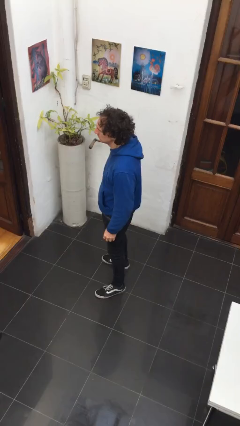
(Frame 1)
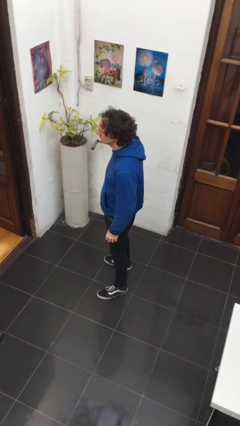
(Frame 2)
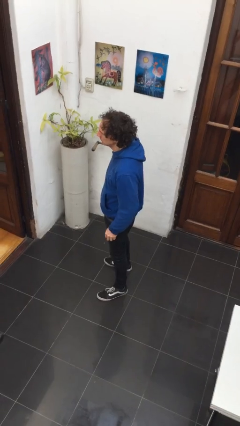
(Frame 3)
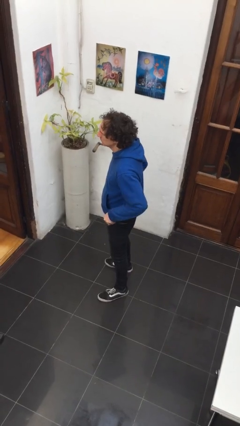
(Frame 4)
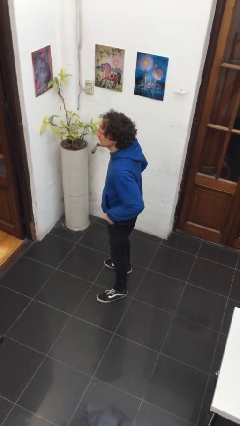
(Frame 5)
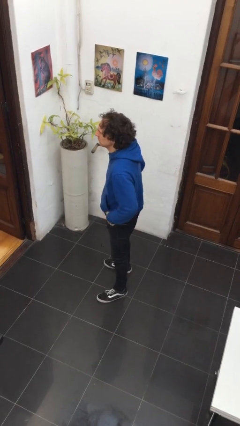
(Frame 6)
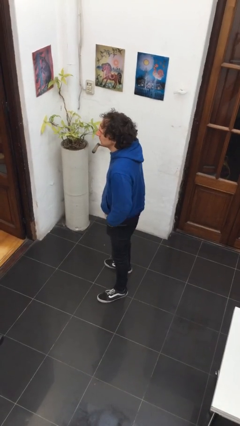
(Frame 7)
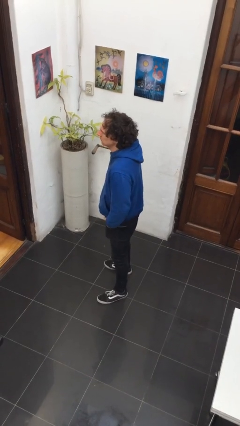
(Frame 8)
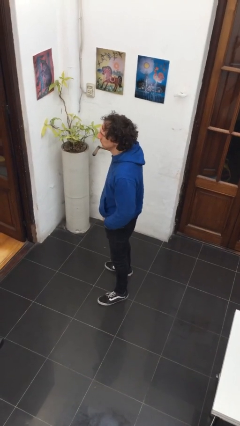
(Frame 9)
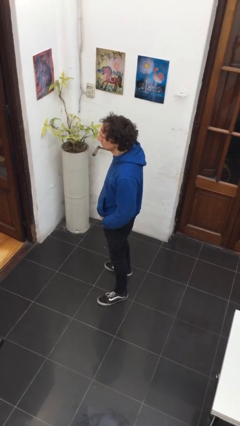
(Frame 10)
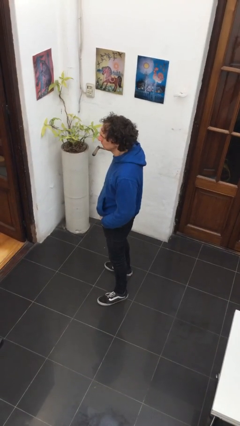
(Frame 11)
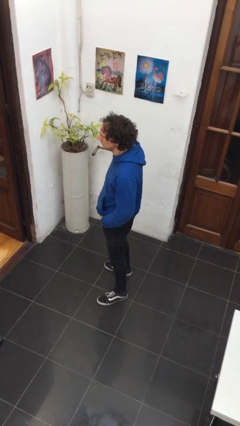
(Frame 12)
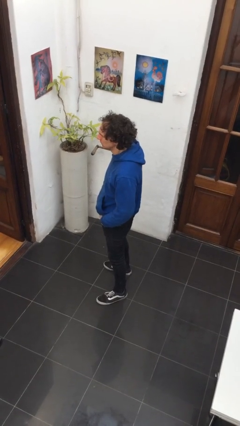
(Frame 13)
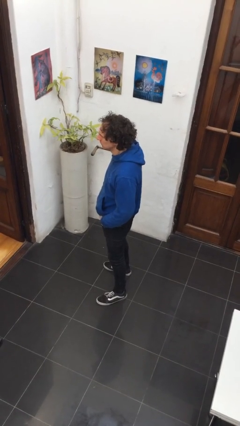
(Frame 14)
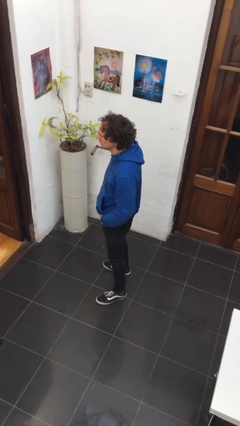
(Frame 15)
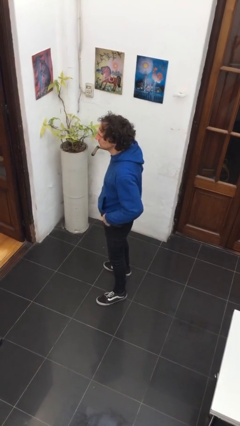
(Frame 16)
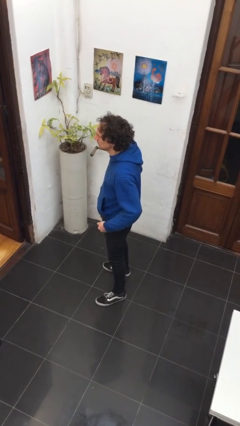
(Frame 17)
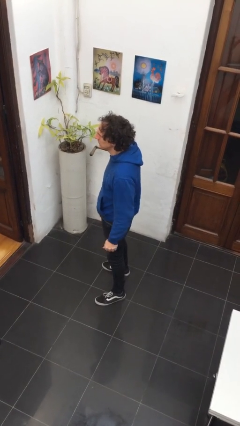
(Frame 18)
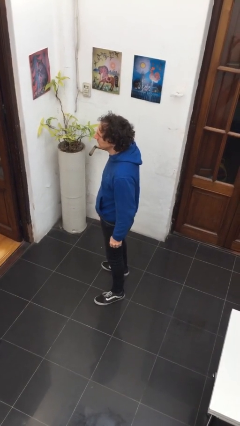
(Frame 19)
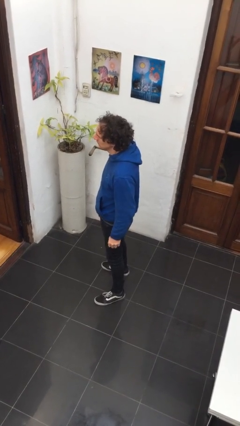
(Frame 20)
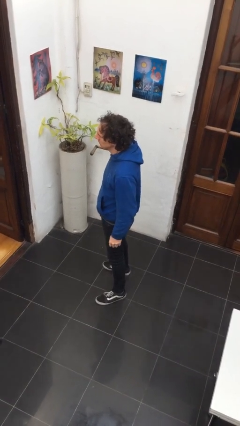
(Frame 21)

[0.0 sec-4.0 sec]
person puts hands in back pockets

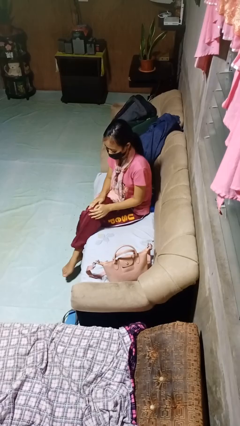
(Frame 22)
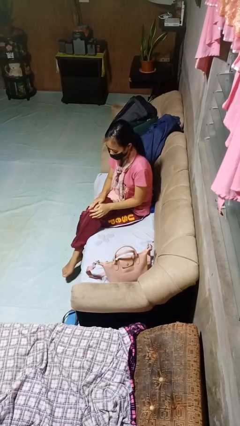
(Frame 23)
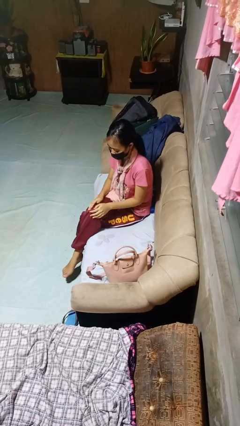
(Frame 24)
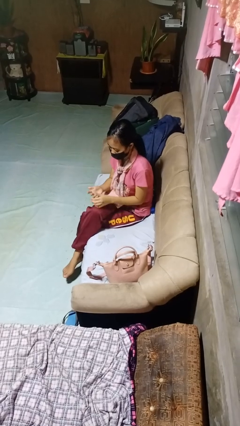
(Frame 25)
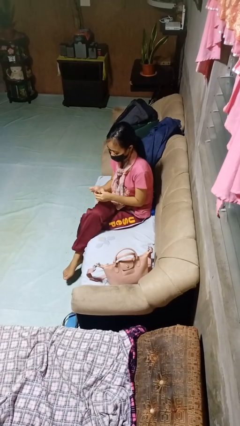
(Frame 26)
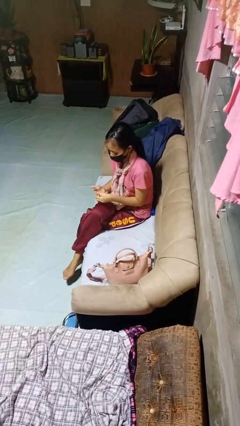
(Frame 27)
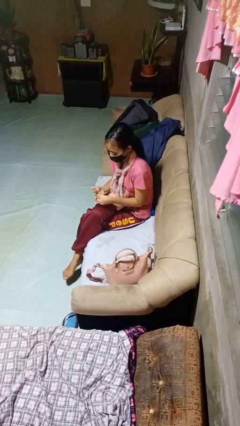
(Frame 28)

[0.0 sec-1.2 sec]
person takes off ring

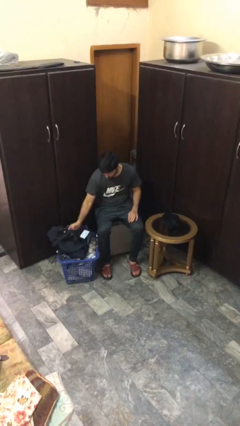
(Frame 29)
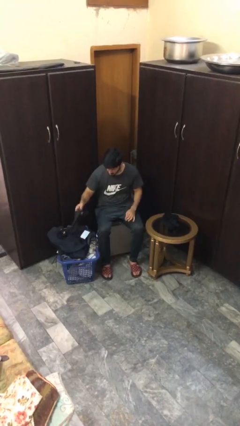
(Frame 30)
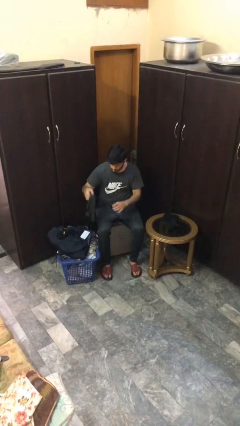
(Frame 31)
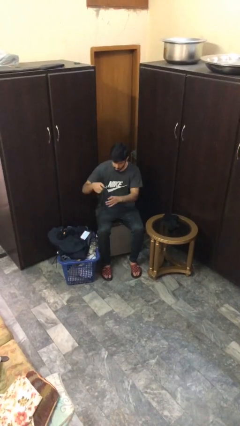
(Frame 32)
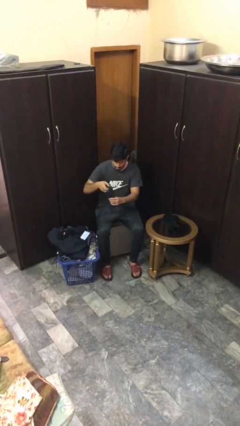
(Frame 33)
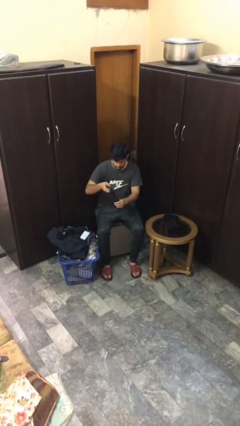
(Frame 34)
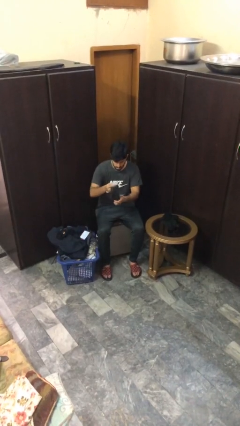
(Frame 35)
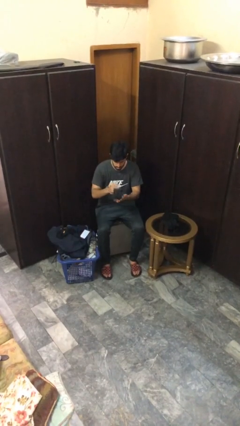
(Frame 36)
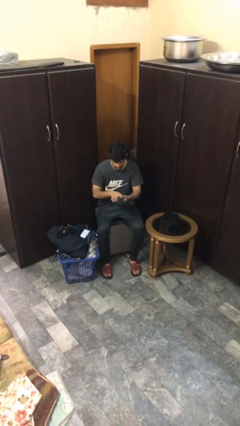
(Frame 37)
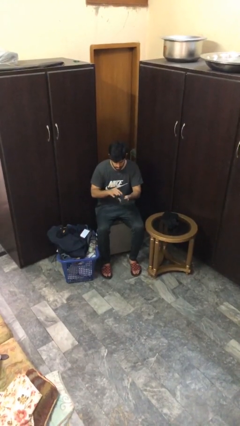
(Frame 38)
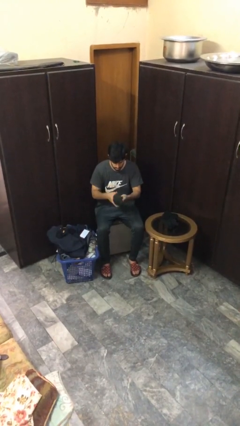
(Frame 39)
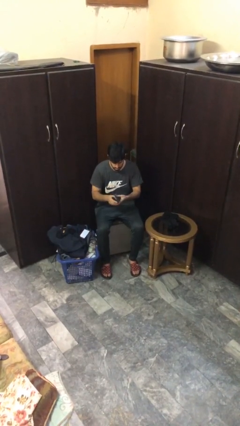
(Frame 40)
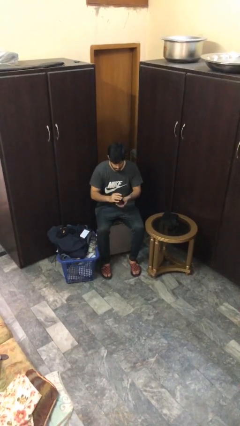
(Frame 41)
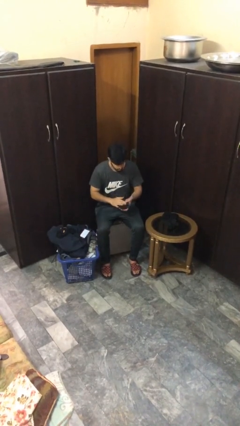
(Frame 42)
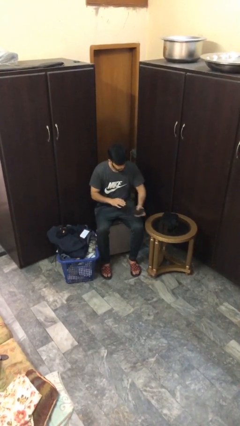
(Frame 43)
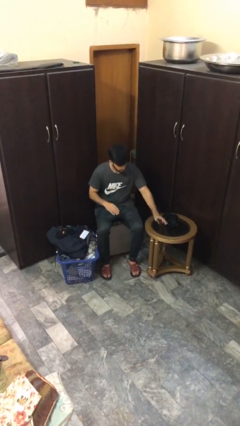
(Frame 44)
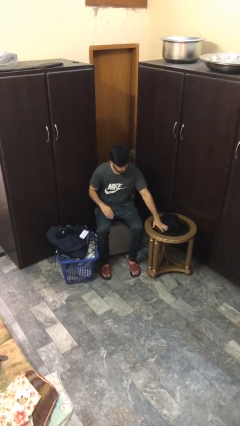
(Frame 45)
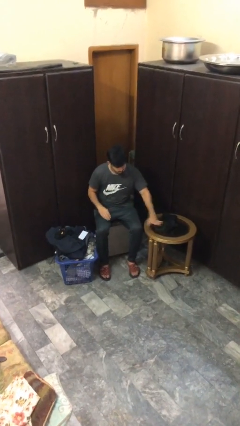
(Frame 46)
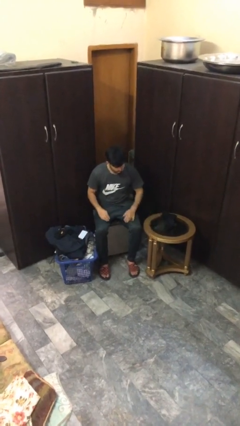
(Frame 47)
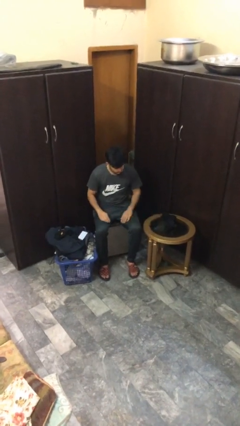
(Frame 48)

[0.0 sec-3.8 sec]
person folds socks

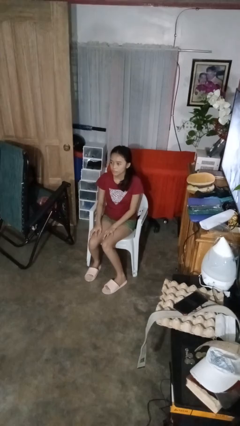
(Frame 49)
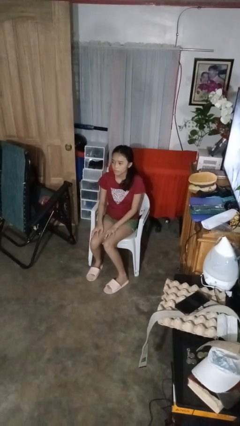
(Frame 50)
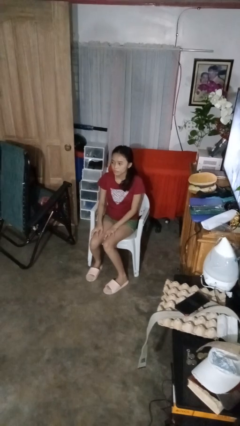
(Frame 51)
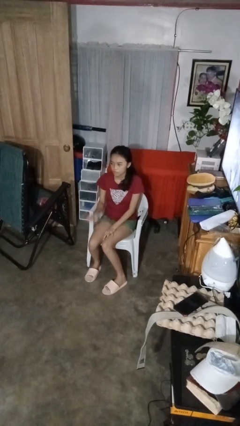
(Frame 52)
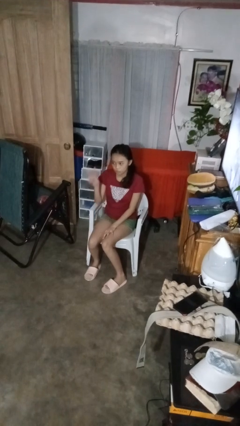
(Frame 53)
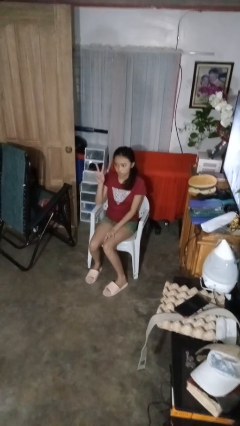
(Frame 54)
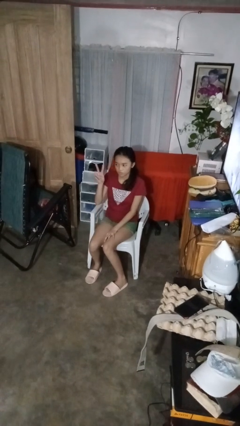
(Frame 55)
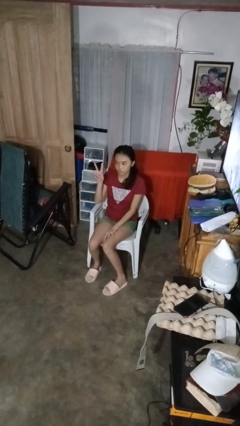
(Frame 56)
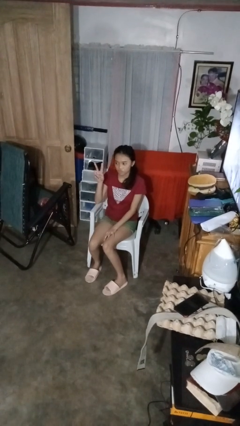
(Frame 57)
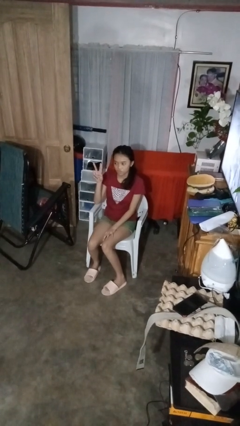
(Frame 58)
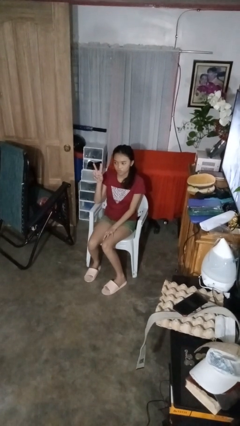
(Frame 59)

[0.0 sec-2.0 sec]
person gestures peace

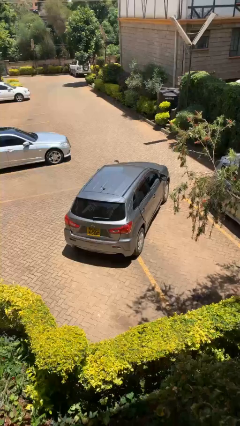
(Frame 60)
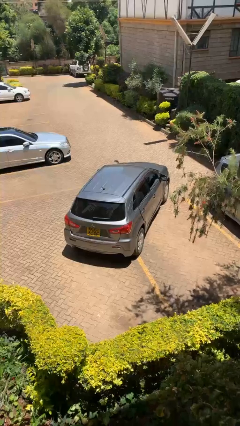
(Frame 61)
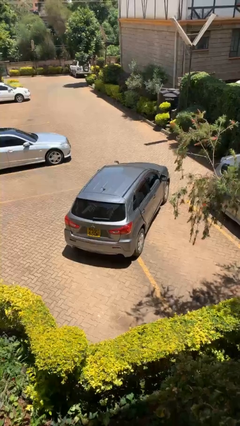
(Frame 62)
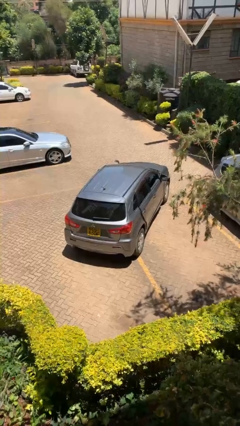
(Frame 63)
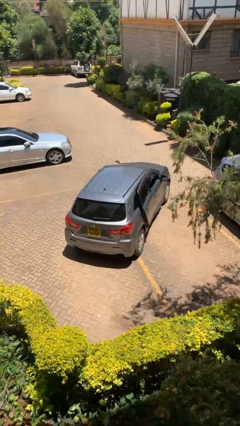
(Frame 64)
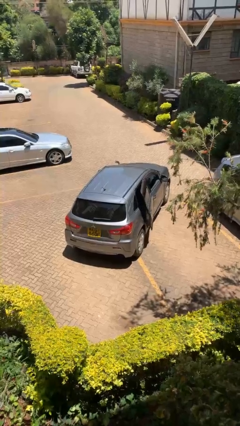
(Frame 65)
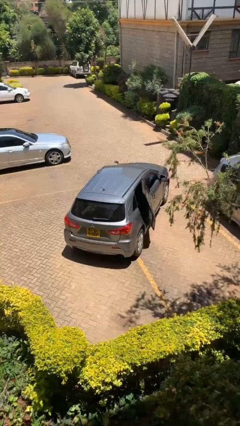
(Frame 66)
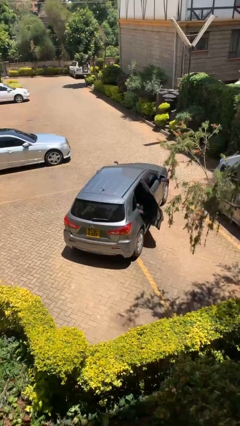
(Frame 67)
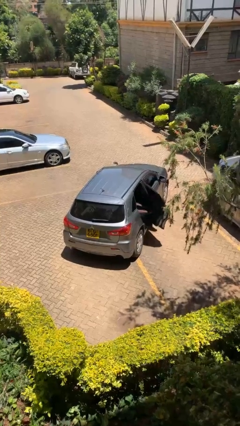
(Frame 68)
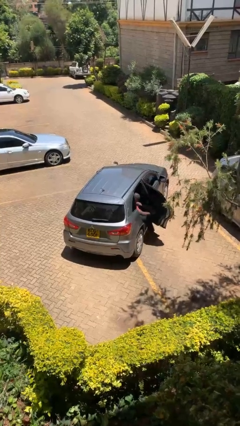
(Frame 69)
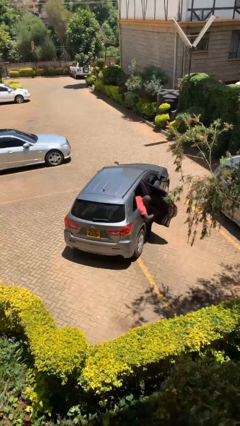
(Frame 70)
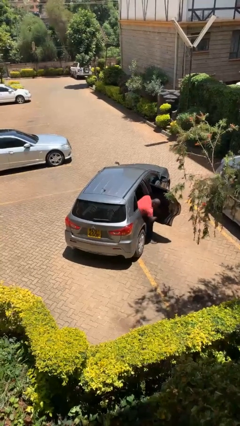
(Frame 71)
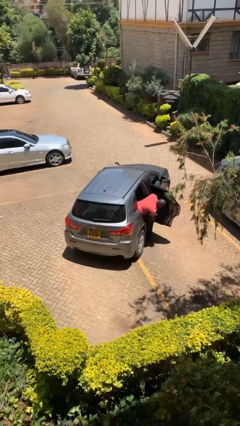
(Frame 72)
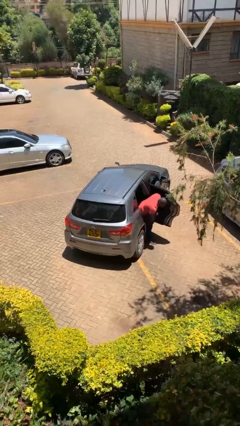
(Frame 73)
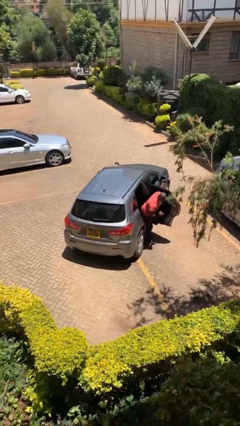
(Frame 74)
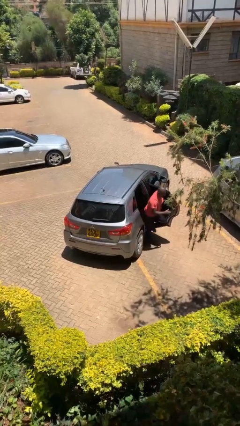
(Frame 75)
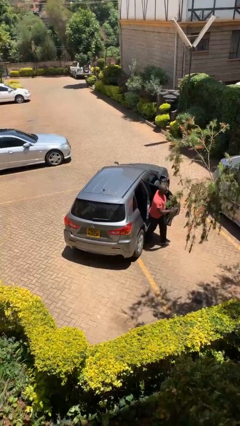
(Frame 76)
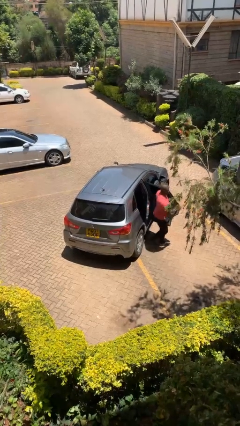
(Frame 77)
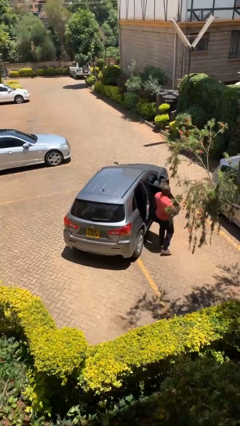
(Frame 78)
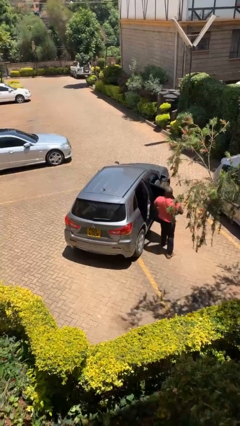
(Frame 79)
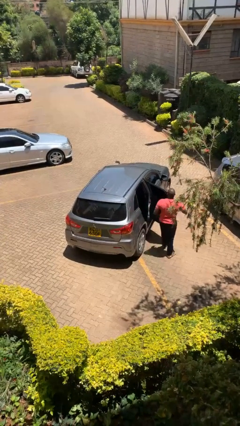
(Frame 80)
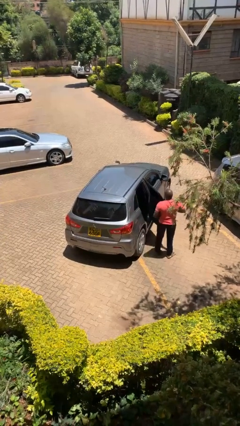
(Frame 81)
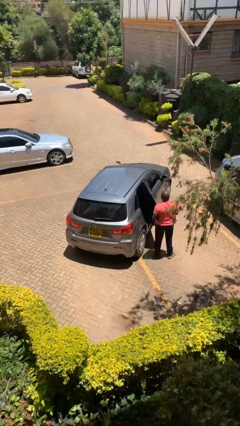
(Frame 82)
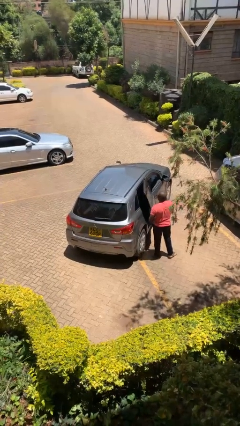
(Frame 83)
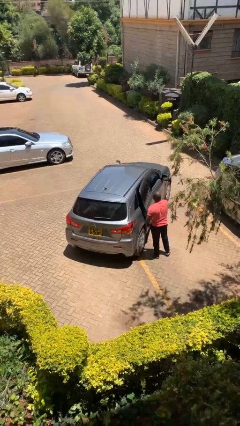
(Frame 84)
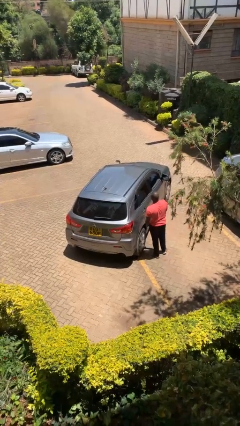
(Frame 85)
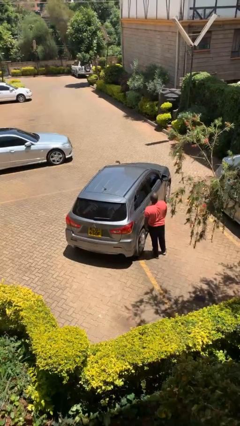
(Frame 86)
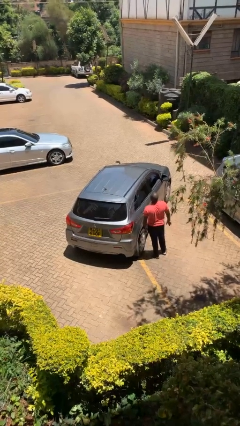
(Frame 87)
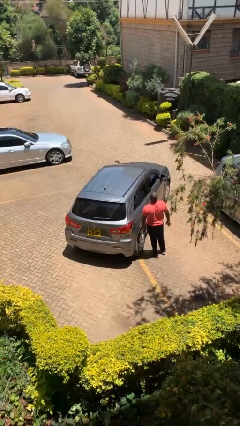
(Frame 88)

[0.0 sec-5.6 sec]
car drops off person

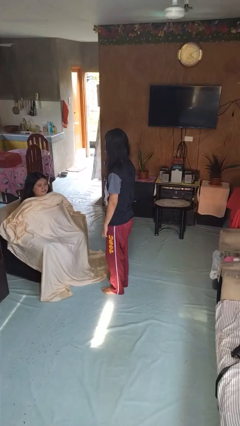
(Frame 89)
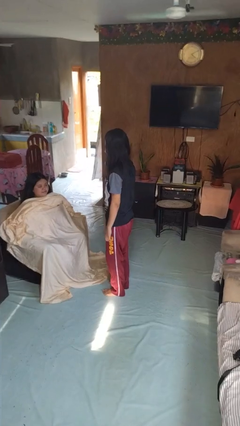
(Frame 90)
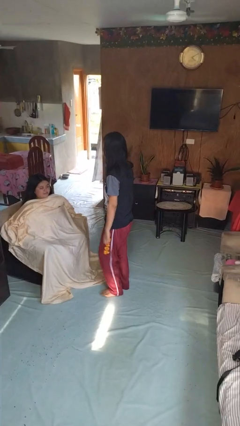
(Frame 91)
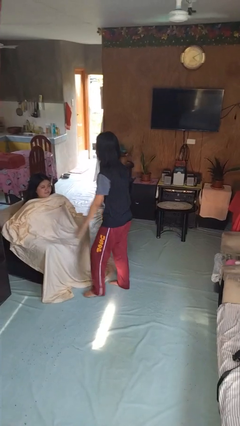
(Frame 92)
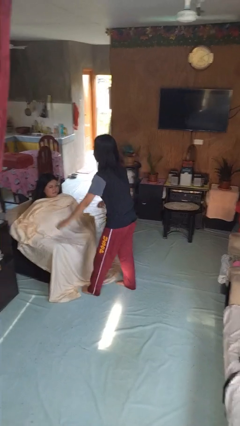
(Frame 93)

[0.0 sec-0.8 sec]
person uncovers friend with blanket
